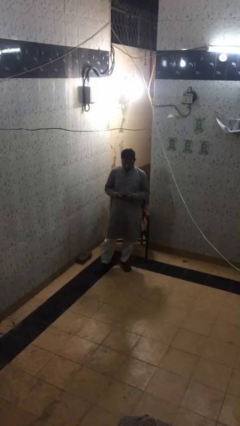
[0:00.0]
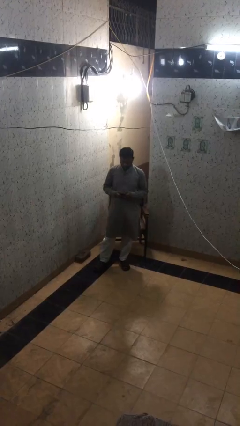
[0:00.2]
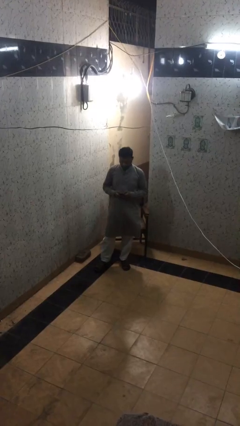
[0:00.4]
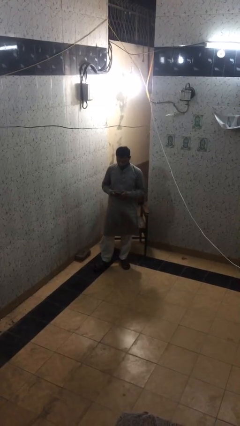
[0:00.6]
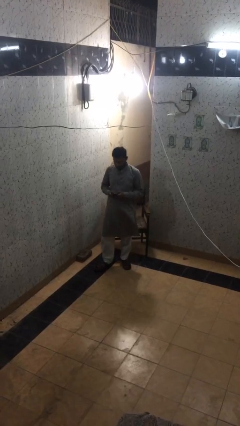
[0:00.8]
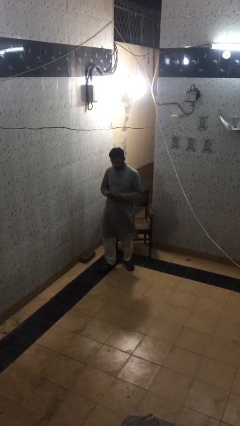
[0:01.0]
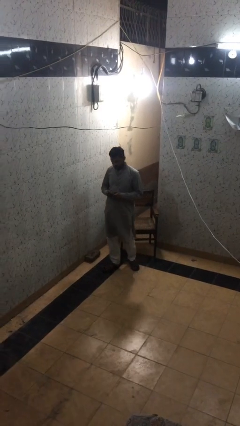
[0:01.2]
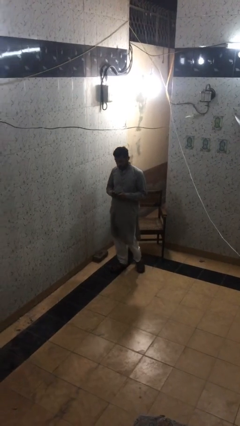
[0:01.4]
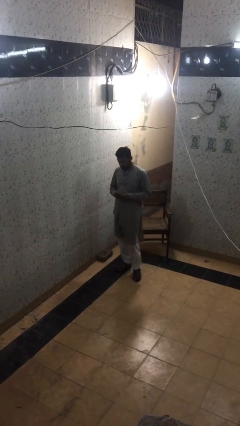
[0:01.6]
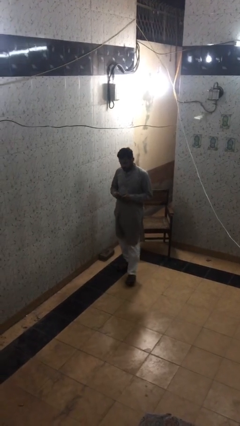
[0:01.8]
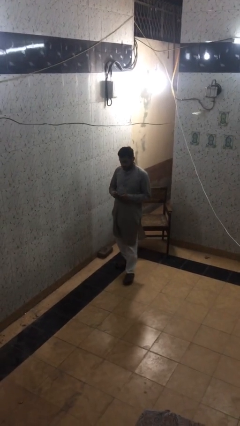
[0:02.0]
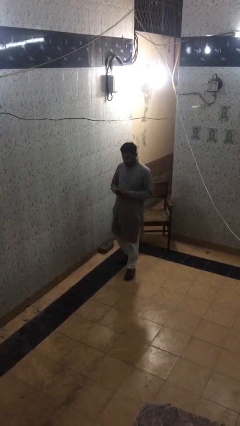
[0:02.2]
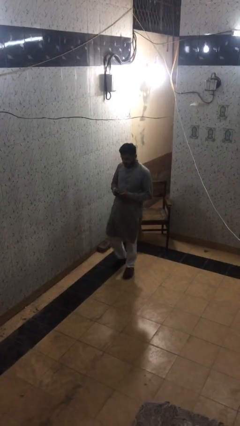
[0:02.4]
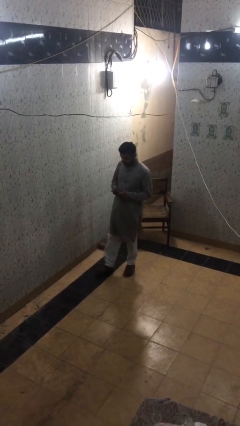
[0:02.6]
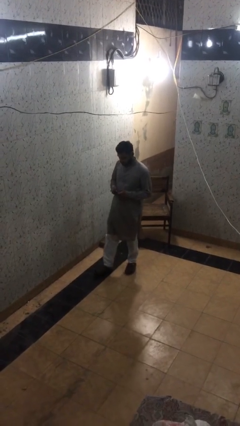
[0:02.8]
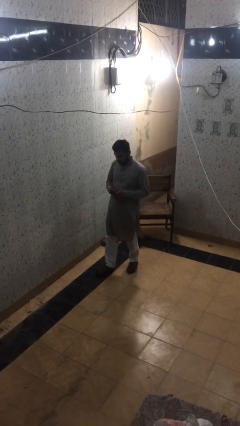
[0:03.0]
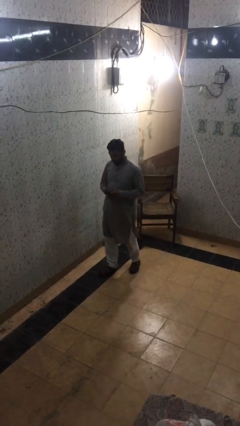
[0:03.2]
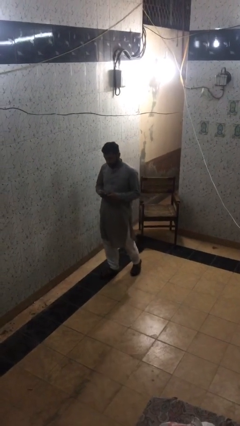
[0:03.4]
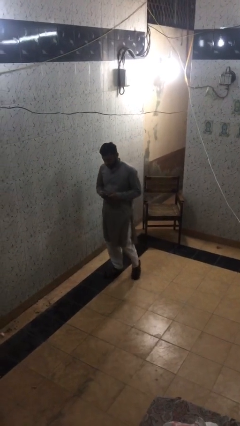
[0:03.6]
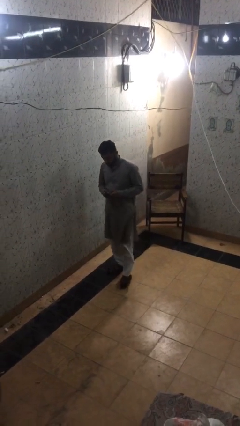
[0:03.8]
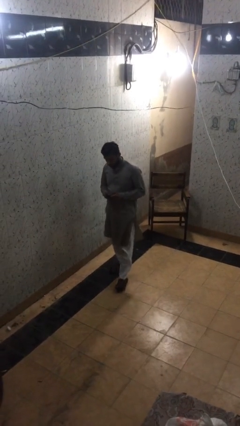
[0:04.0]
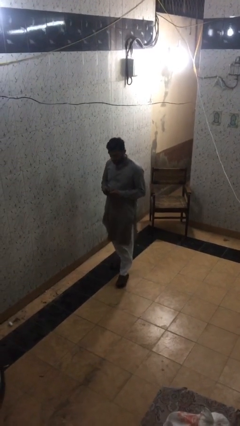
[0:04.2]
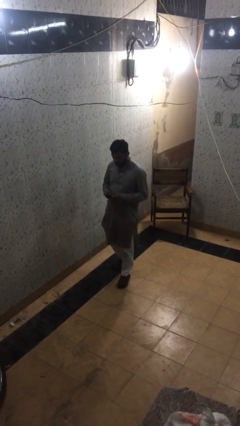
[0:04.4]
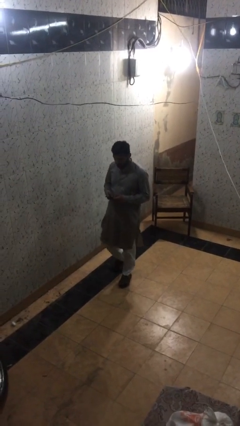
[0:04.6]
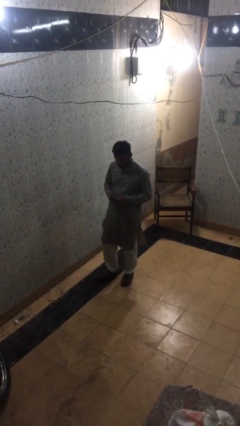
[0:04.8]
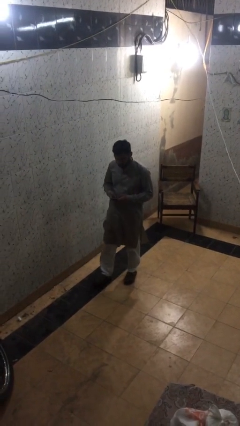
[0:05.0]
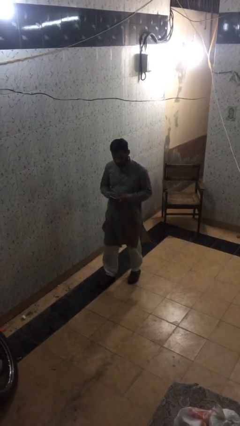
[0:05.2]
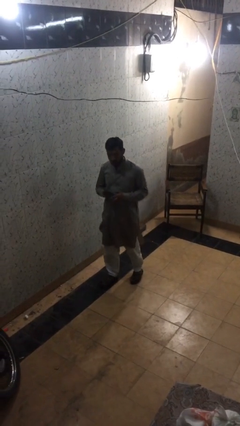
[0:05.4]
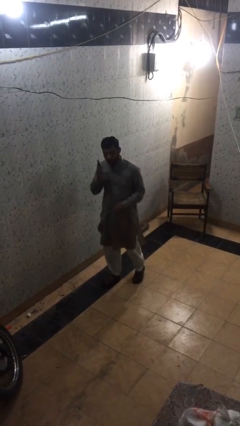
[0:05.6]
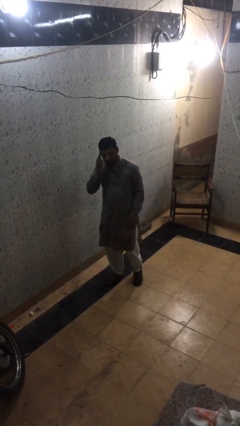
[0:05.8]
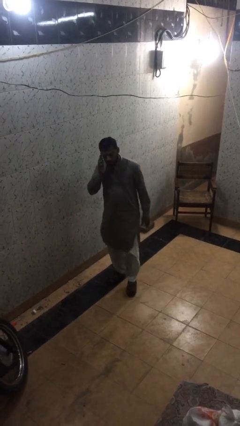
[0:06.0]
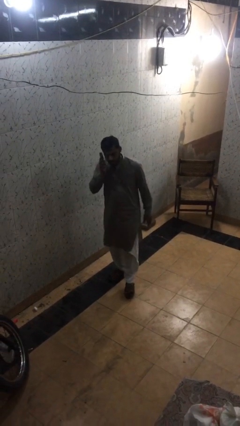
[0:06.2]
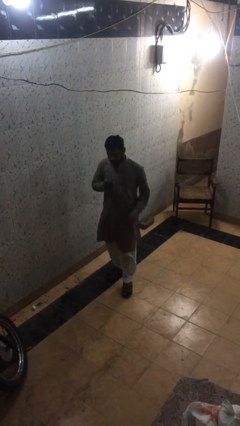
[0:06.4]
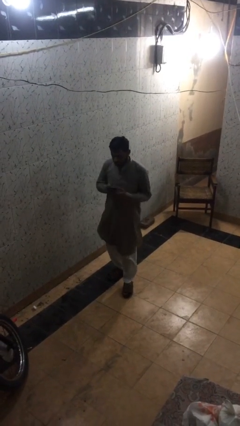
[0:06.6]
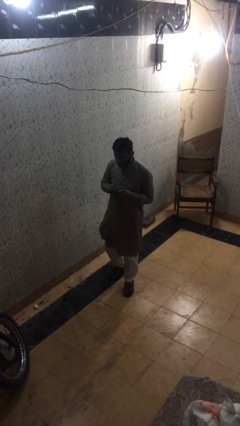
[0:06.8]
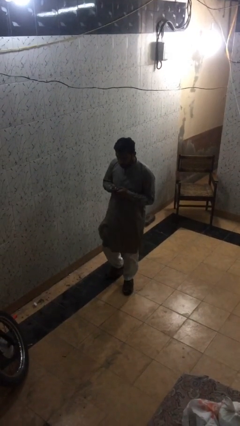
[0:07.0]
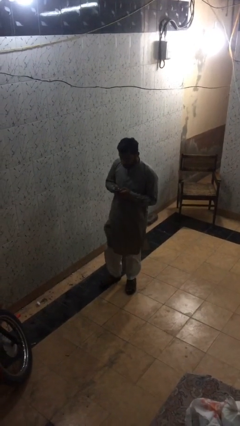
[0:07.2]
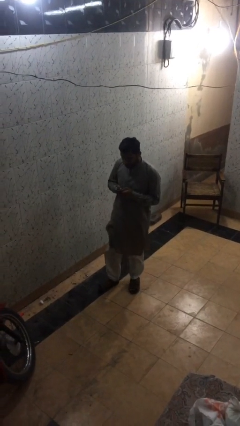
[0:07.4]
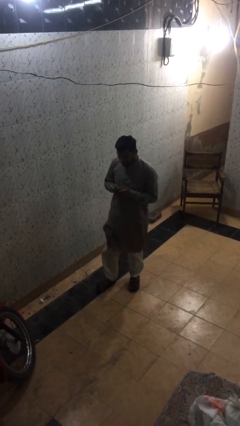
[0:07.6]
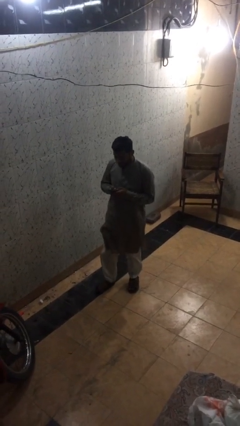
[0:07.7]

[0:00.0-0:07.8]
person texts on phone

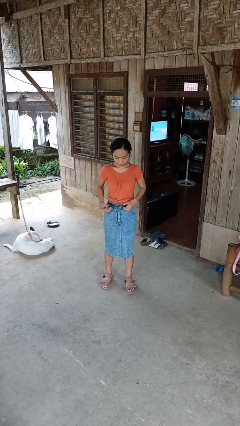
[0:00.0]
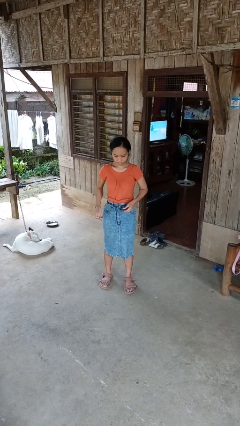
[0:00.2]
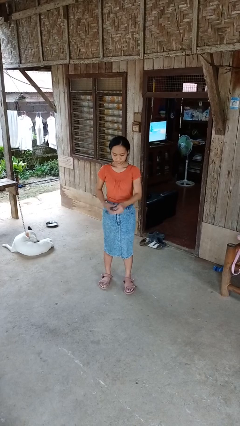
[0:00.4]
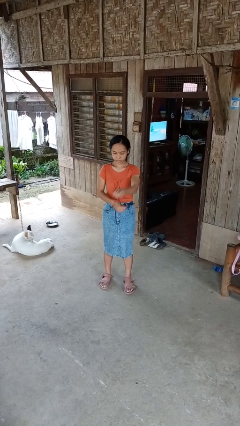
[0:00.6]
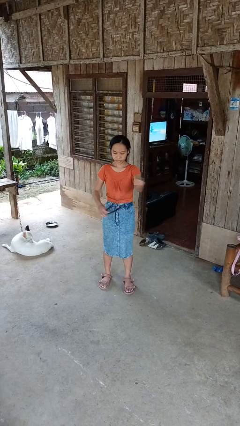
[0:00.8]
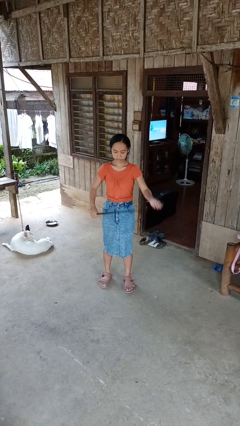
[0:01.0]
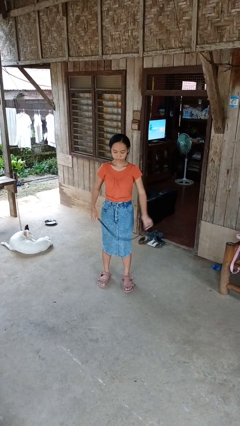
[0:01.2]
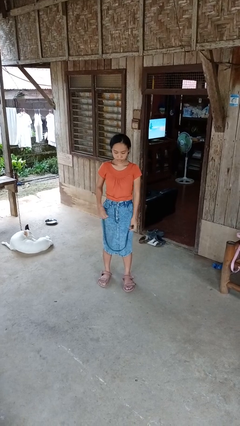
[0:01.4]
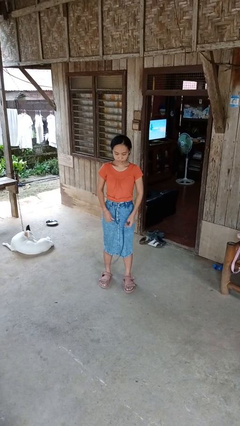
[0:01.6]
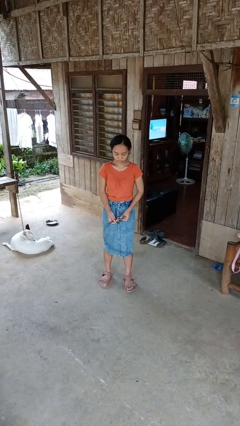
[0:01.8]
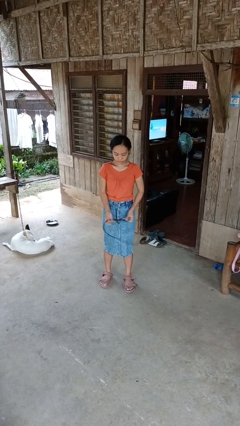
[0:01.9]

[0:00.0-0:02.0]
person takes off belt

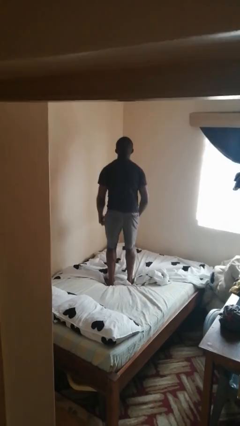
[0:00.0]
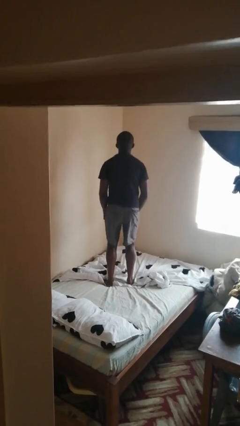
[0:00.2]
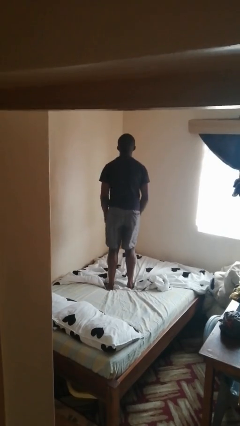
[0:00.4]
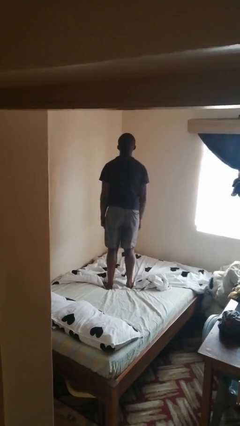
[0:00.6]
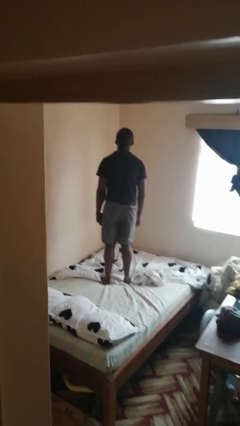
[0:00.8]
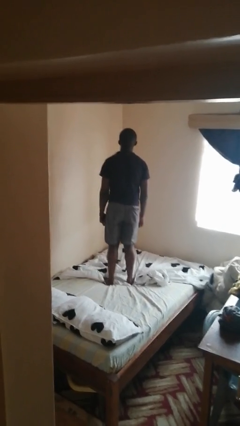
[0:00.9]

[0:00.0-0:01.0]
person jumps on bed

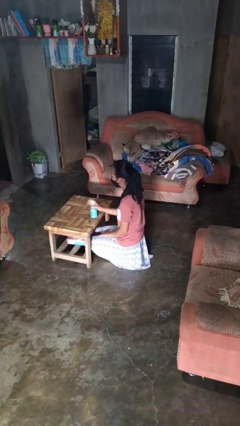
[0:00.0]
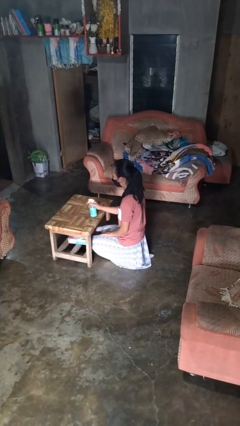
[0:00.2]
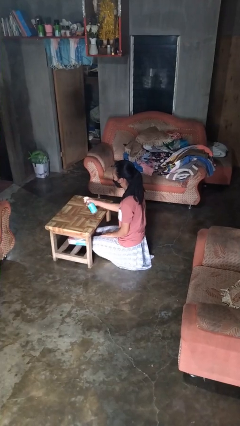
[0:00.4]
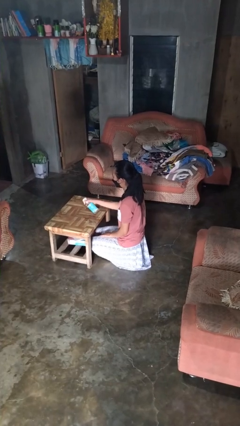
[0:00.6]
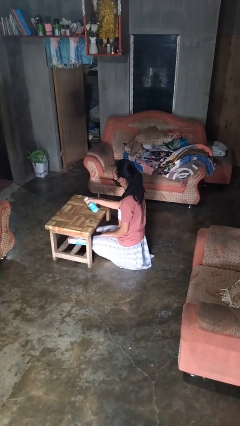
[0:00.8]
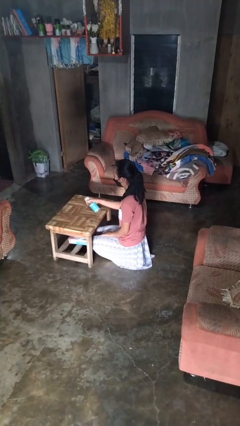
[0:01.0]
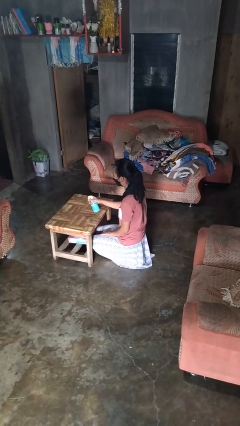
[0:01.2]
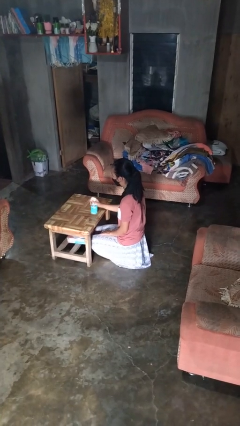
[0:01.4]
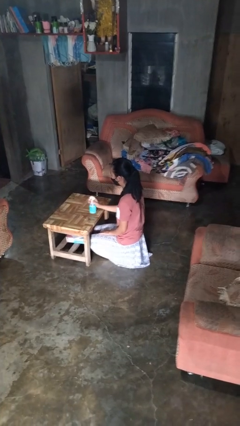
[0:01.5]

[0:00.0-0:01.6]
person sprays from bottle

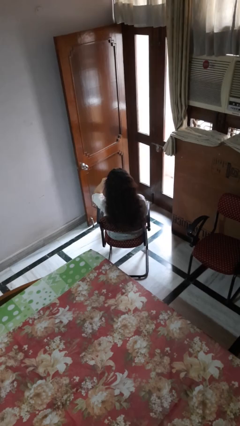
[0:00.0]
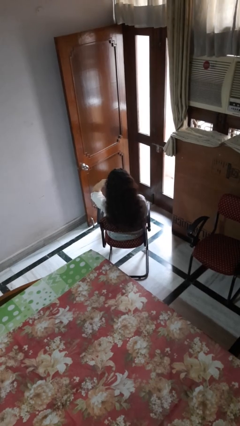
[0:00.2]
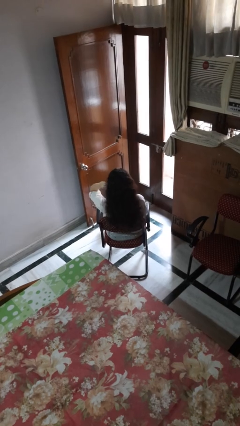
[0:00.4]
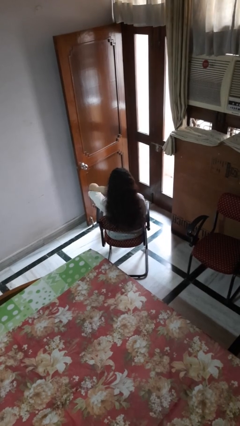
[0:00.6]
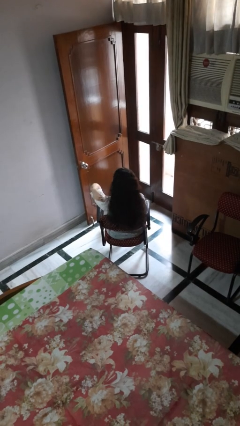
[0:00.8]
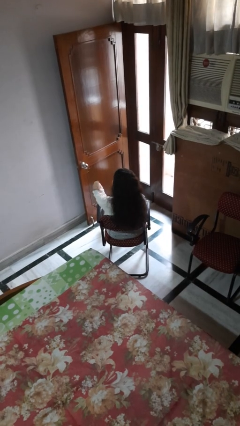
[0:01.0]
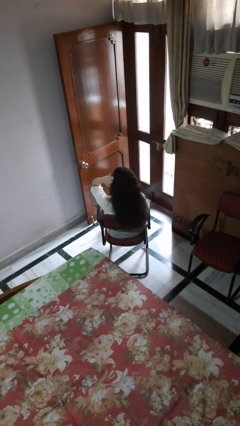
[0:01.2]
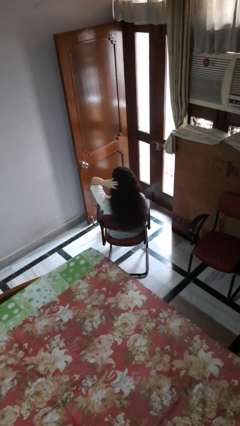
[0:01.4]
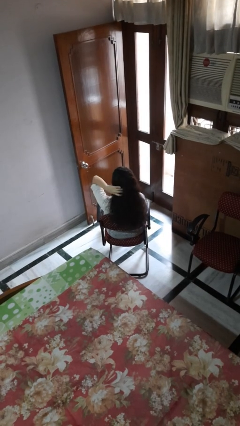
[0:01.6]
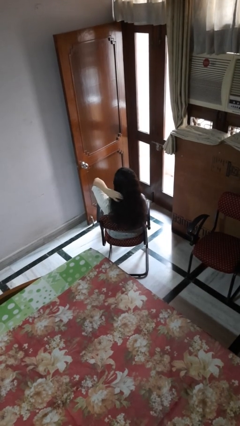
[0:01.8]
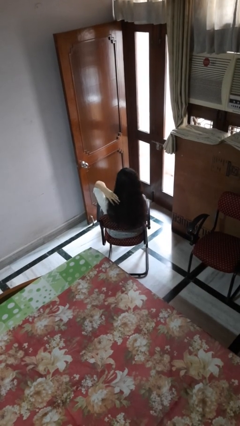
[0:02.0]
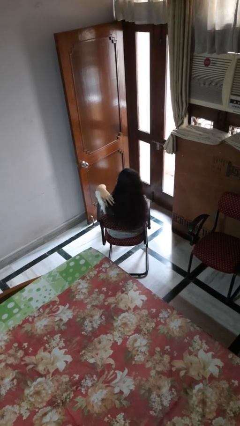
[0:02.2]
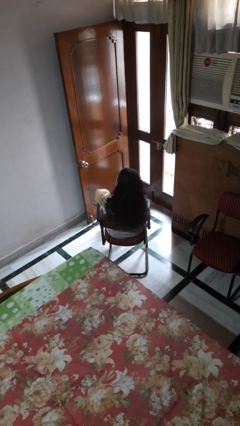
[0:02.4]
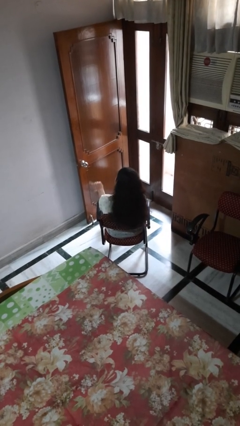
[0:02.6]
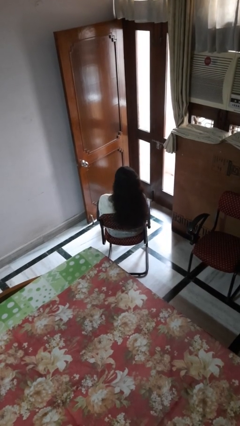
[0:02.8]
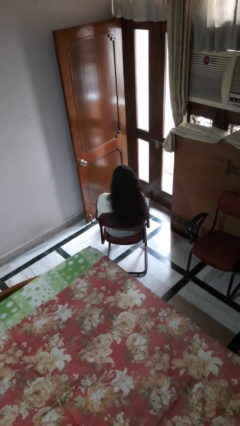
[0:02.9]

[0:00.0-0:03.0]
person strokes hair

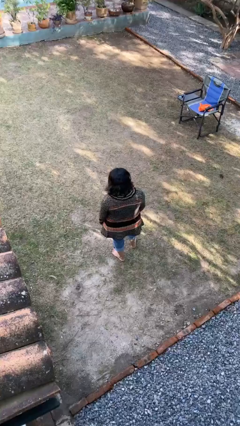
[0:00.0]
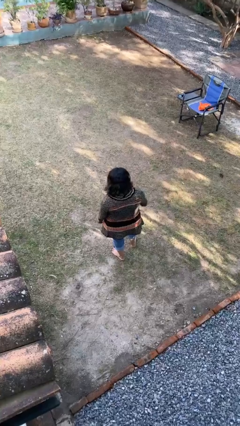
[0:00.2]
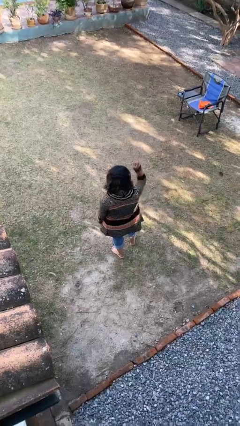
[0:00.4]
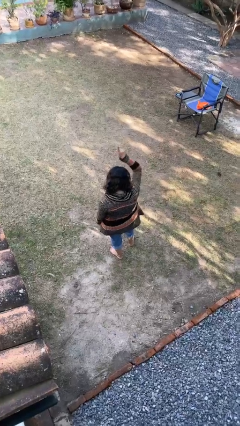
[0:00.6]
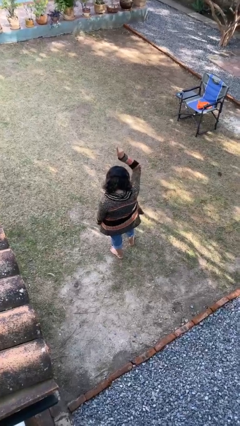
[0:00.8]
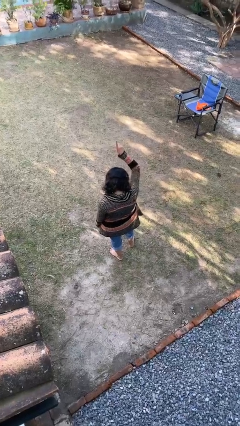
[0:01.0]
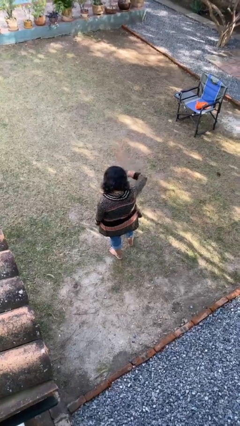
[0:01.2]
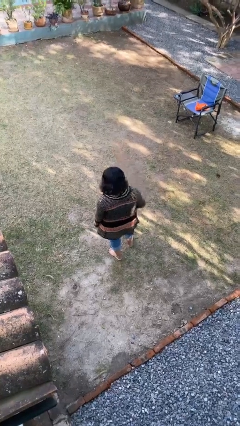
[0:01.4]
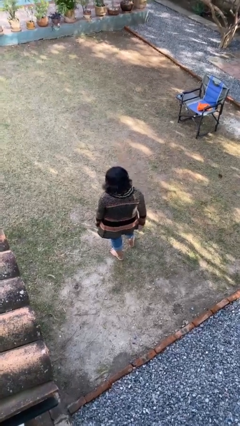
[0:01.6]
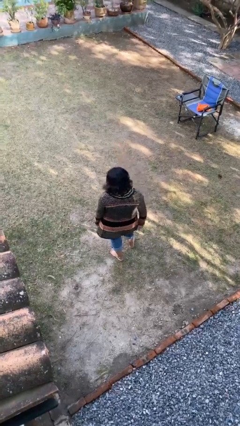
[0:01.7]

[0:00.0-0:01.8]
person gestures number one
